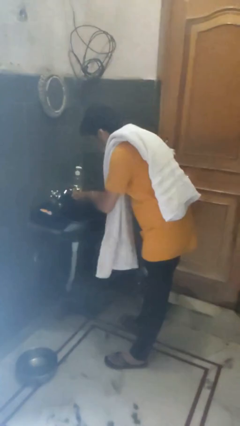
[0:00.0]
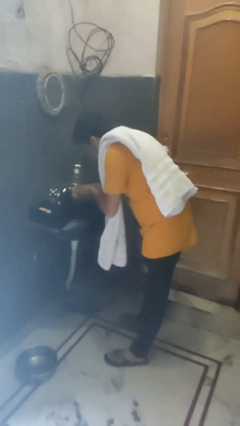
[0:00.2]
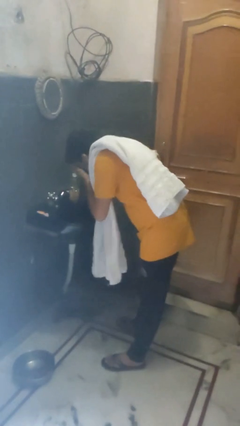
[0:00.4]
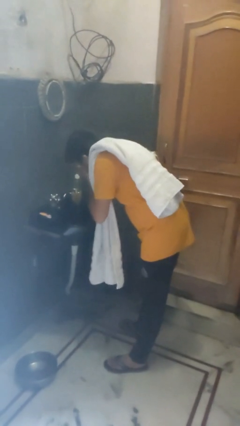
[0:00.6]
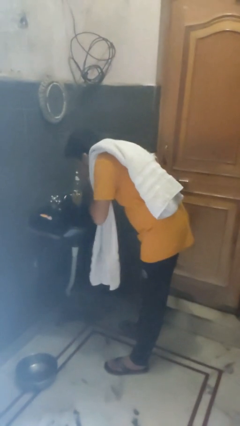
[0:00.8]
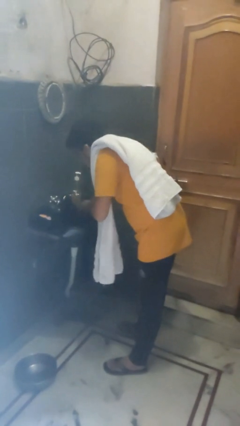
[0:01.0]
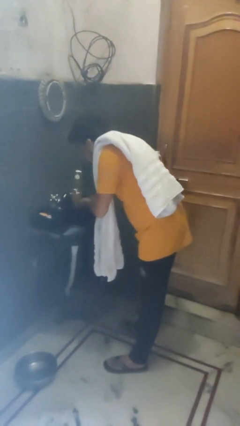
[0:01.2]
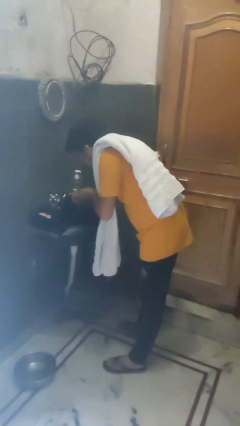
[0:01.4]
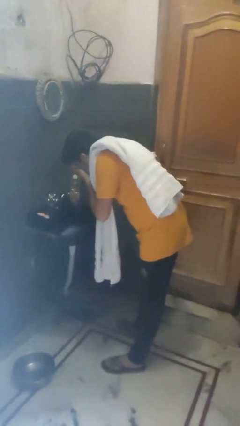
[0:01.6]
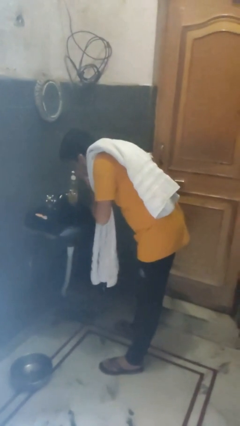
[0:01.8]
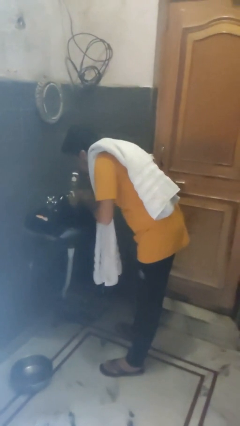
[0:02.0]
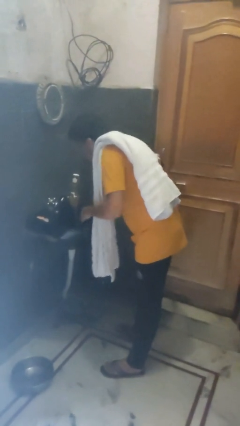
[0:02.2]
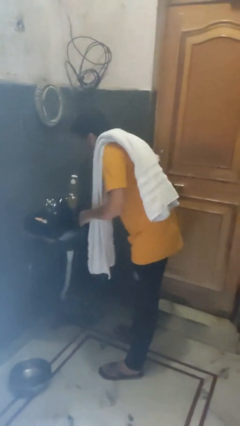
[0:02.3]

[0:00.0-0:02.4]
person washes face

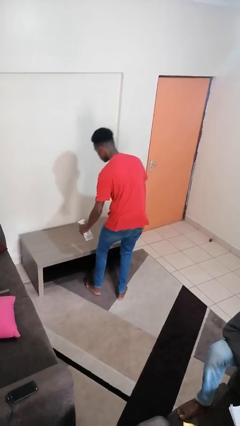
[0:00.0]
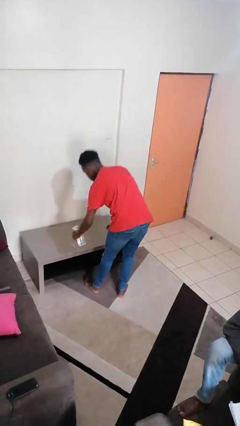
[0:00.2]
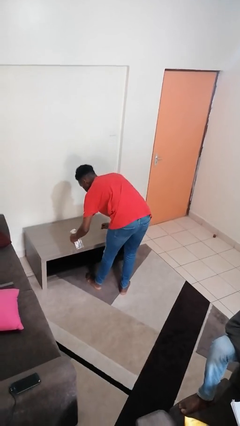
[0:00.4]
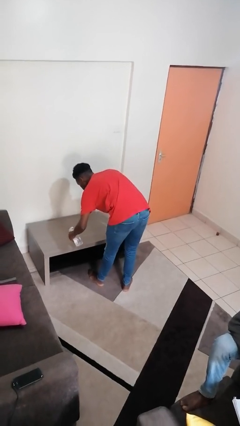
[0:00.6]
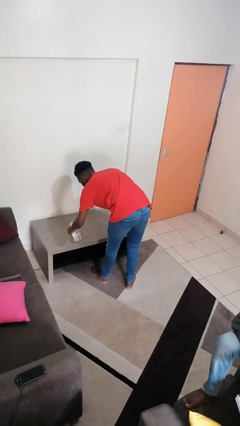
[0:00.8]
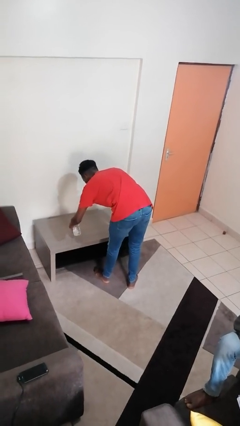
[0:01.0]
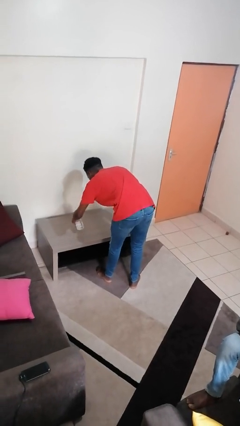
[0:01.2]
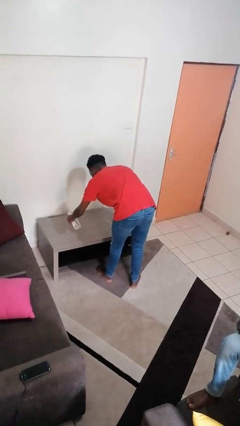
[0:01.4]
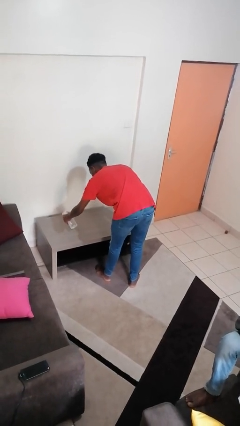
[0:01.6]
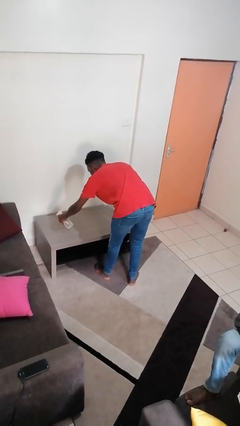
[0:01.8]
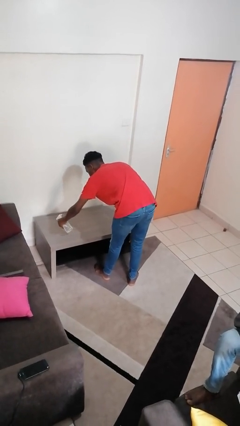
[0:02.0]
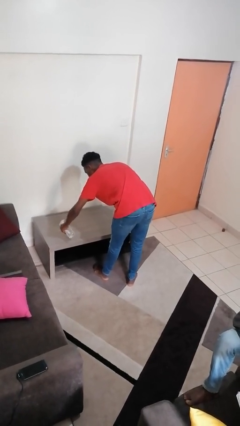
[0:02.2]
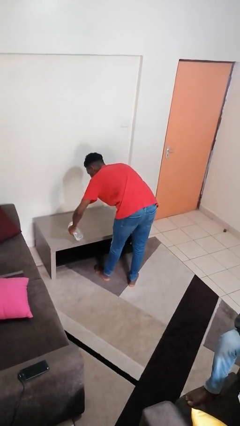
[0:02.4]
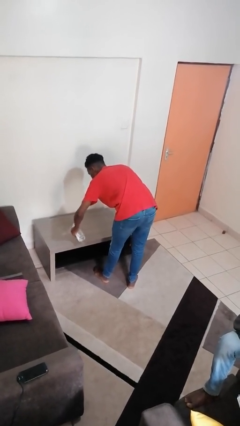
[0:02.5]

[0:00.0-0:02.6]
person sprays from bottle

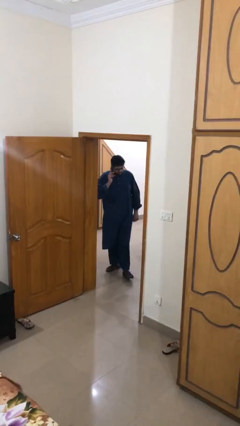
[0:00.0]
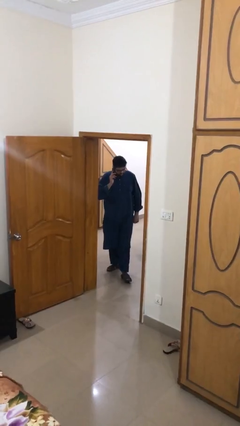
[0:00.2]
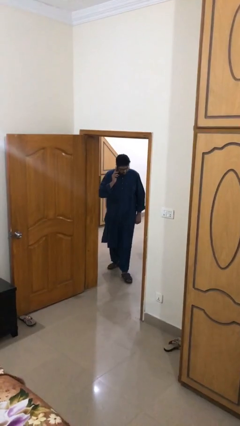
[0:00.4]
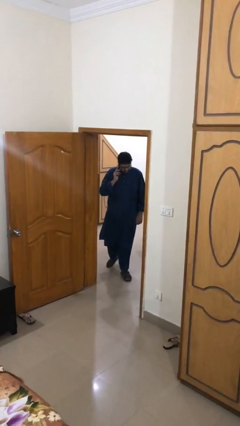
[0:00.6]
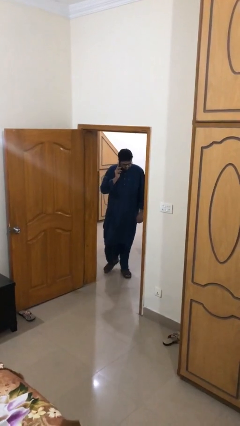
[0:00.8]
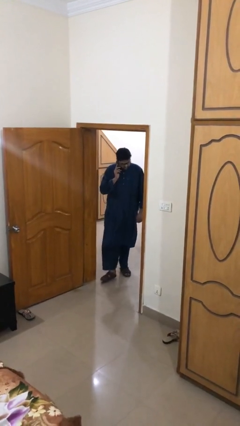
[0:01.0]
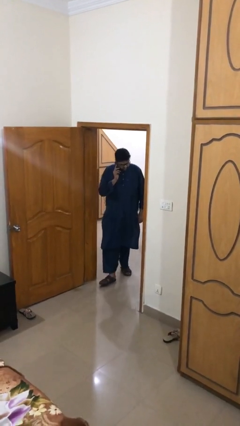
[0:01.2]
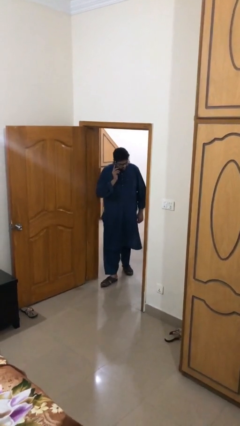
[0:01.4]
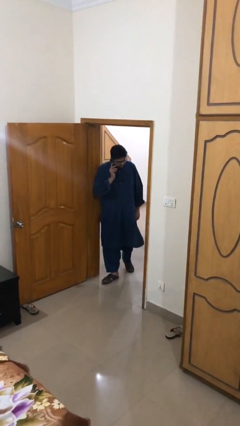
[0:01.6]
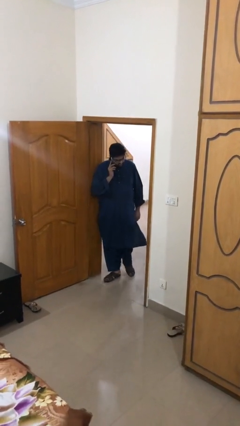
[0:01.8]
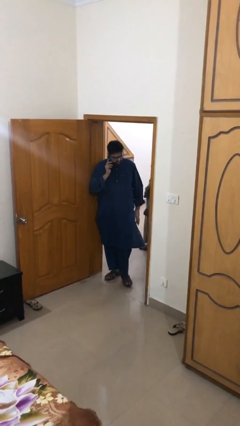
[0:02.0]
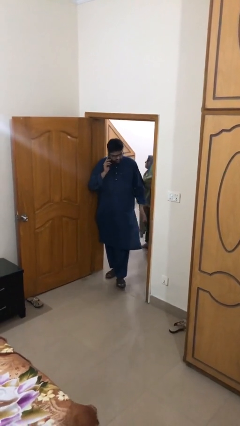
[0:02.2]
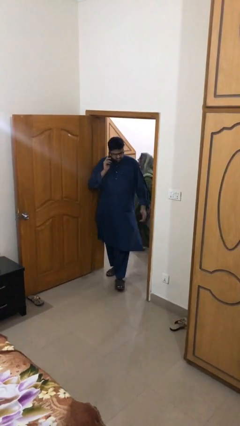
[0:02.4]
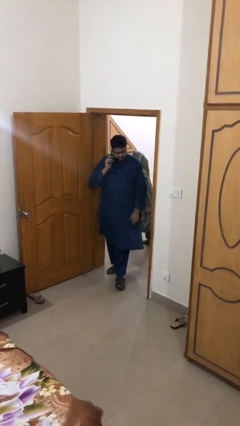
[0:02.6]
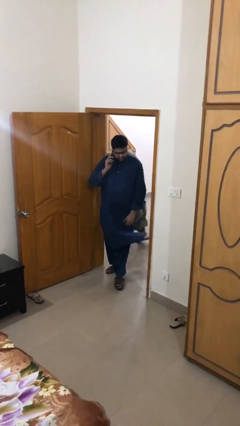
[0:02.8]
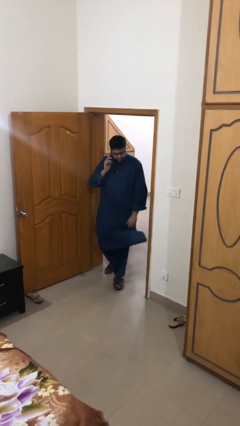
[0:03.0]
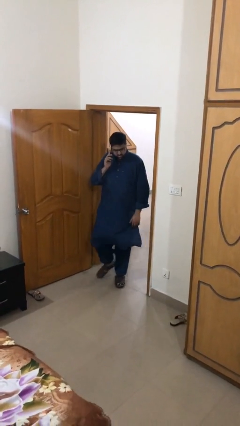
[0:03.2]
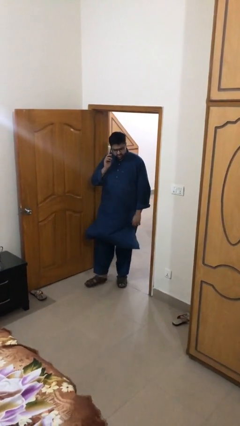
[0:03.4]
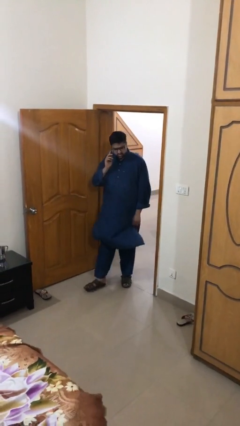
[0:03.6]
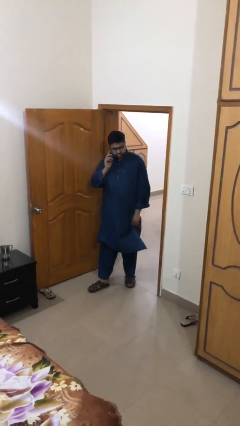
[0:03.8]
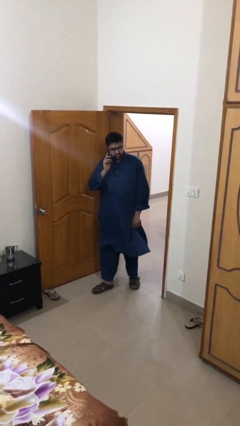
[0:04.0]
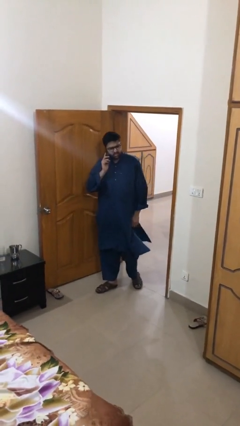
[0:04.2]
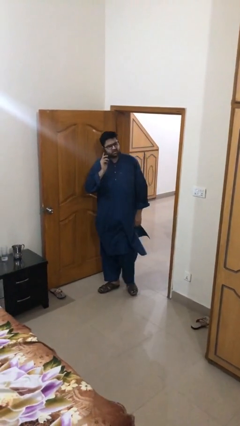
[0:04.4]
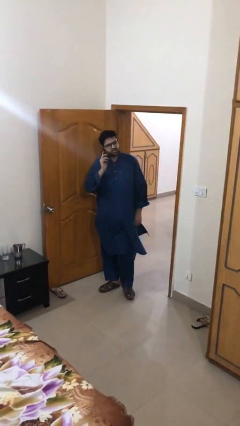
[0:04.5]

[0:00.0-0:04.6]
person enters scene through structure

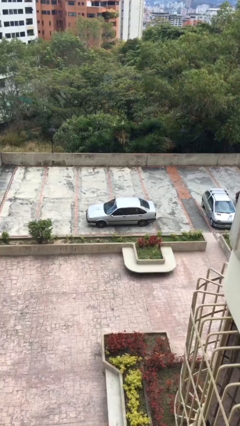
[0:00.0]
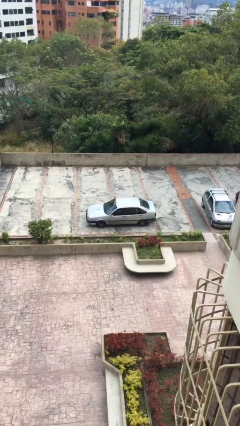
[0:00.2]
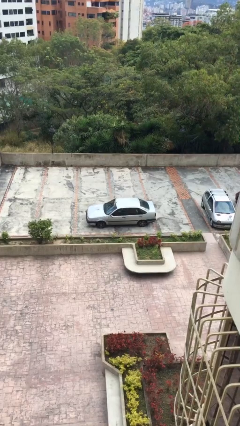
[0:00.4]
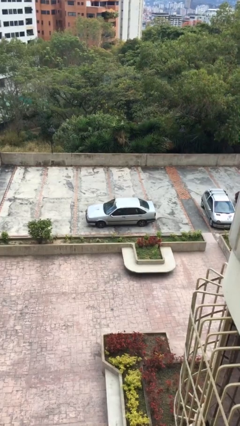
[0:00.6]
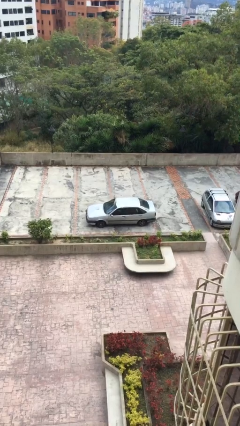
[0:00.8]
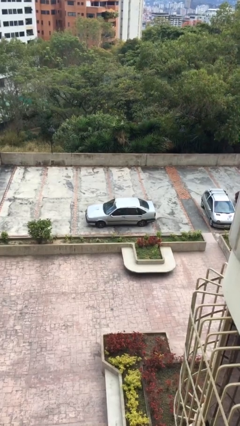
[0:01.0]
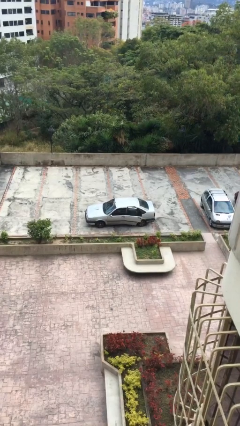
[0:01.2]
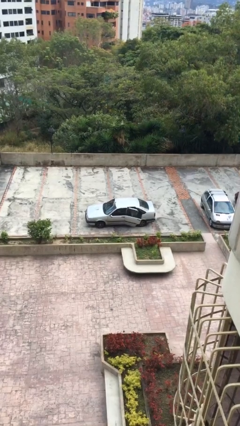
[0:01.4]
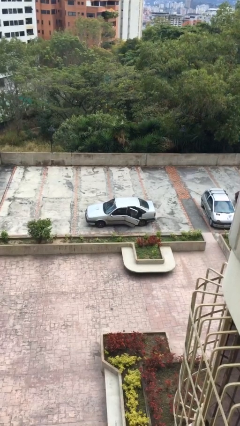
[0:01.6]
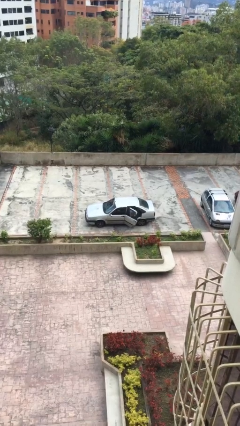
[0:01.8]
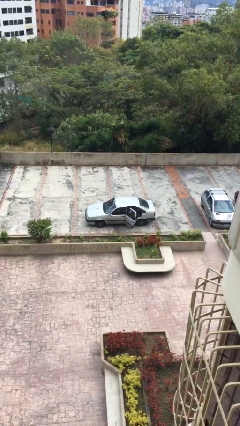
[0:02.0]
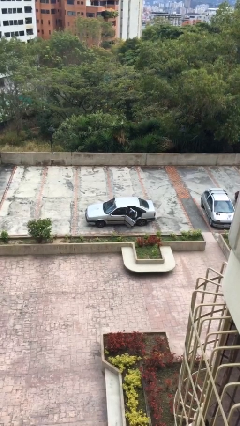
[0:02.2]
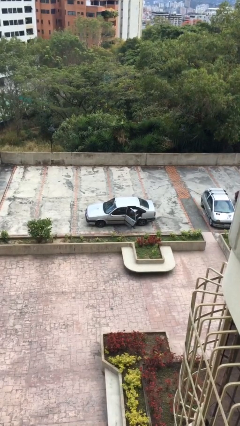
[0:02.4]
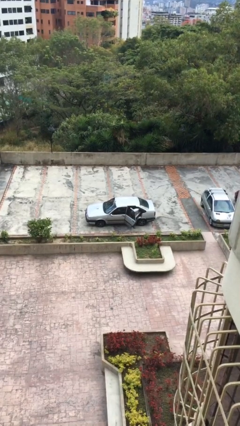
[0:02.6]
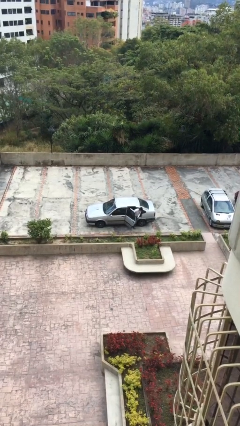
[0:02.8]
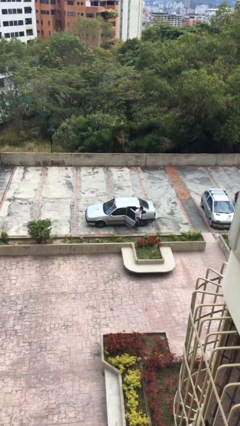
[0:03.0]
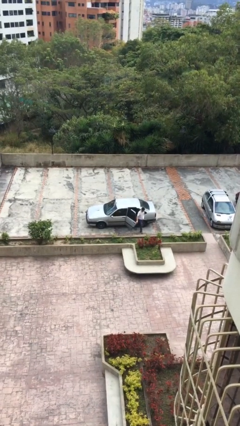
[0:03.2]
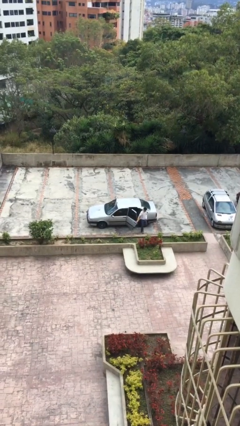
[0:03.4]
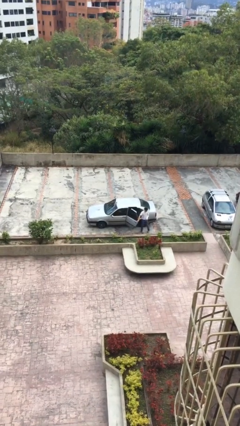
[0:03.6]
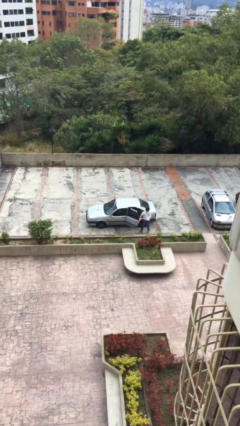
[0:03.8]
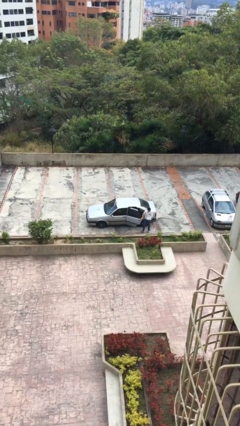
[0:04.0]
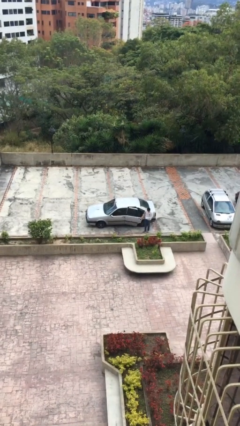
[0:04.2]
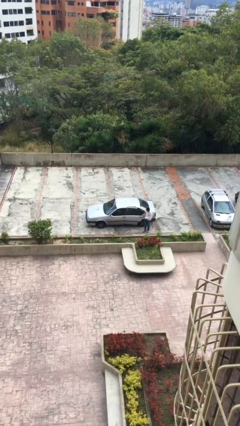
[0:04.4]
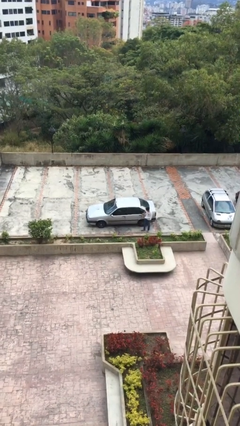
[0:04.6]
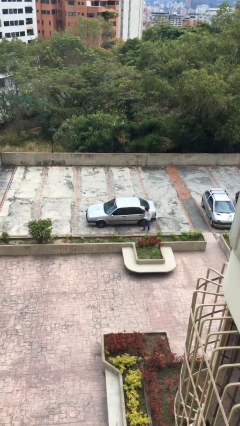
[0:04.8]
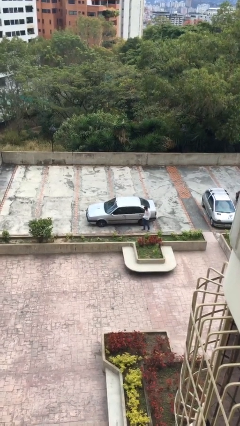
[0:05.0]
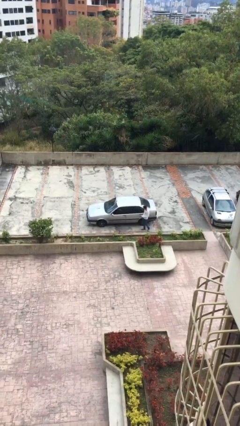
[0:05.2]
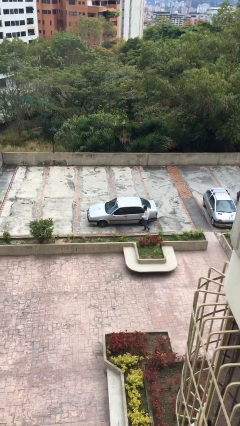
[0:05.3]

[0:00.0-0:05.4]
car drops off person

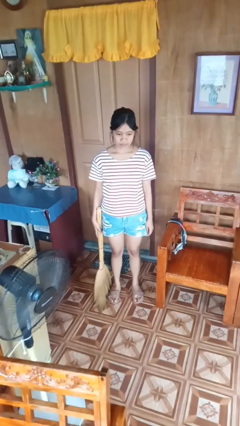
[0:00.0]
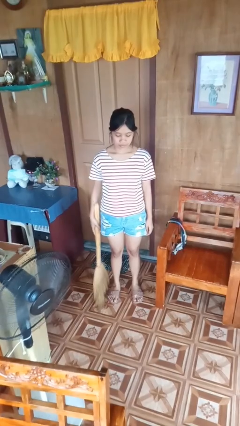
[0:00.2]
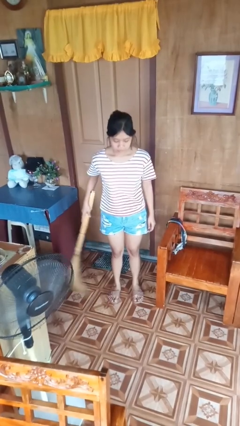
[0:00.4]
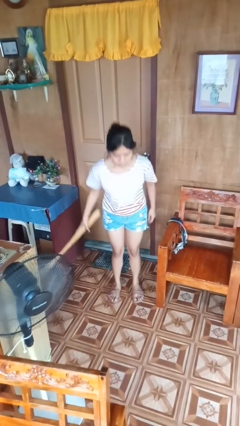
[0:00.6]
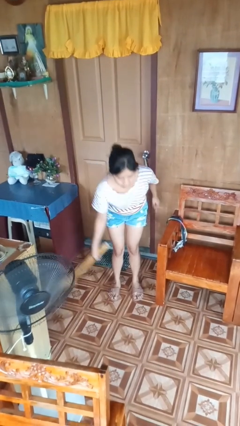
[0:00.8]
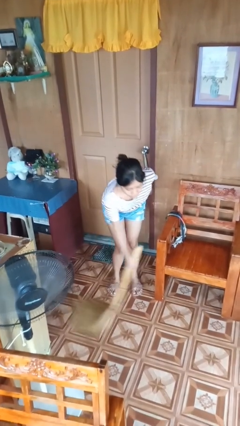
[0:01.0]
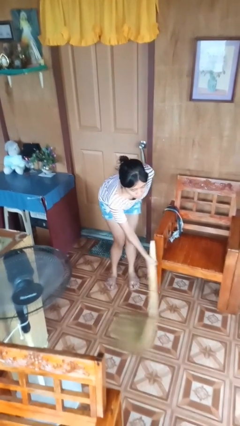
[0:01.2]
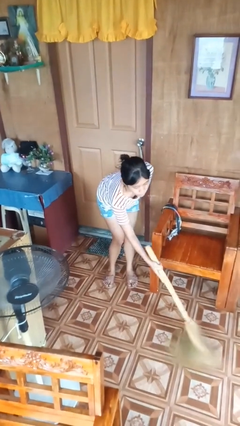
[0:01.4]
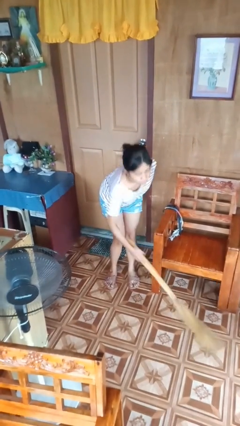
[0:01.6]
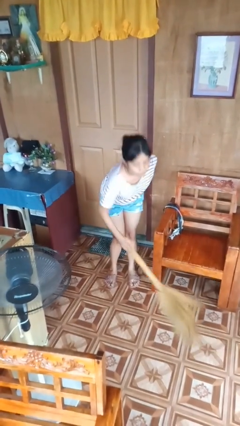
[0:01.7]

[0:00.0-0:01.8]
person sweeps floor

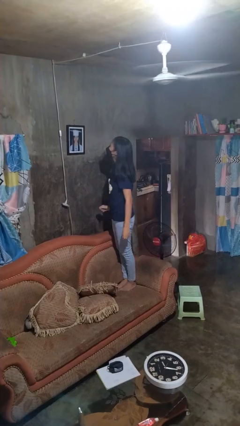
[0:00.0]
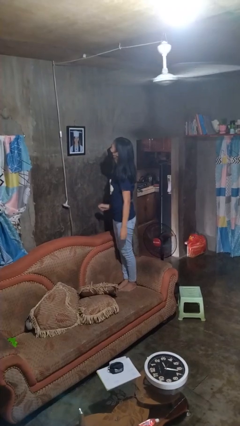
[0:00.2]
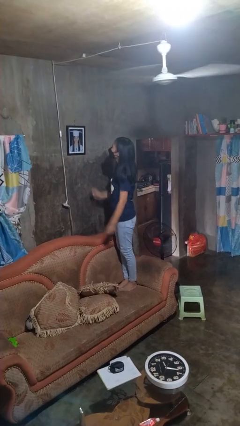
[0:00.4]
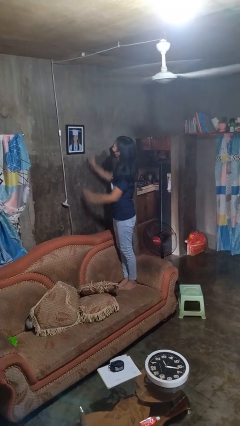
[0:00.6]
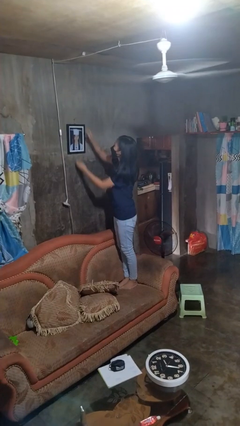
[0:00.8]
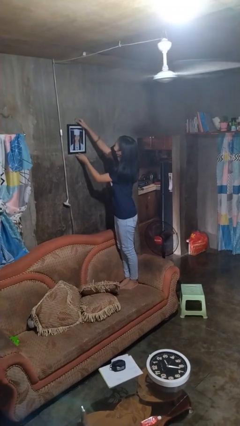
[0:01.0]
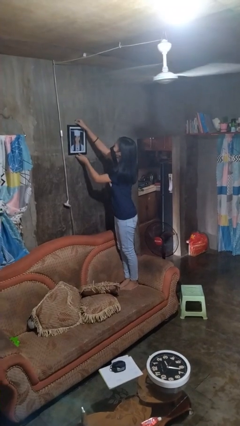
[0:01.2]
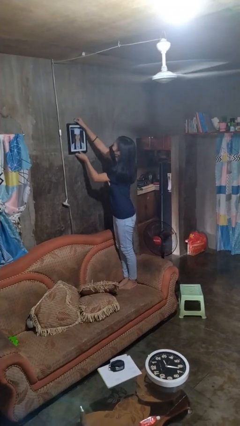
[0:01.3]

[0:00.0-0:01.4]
person takes down picture frame
